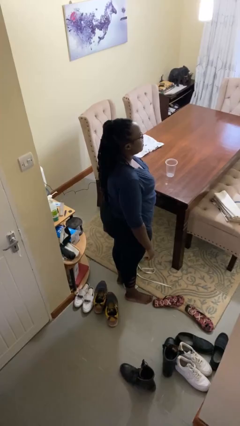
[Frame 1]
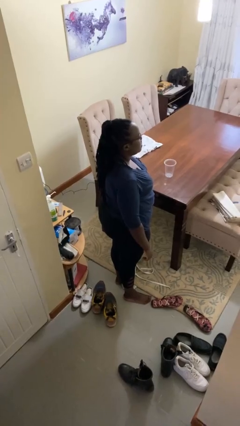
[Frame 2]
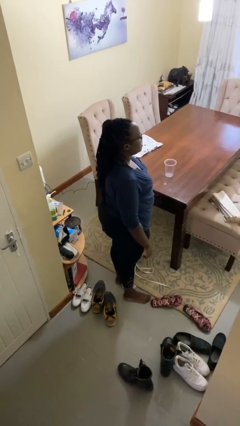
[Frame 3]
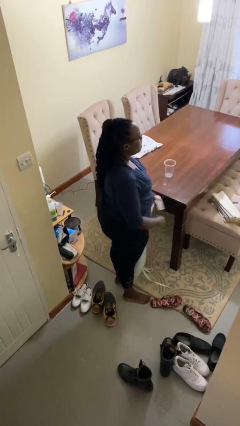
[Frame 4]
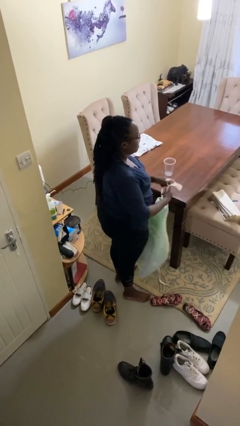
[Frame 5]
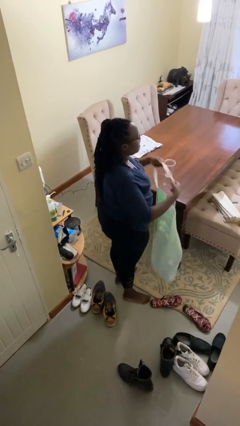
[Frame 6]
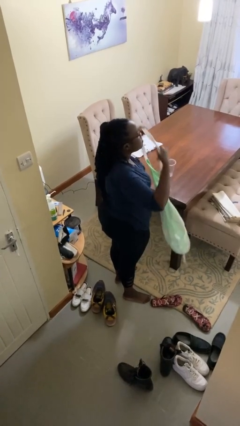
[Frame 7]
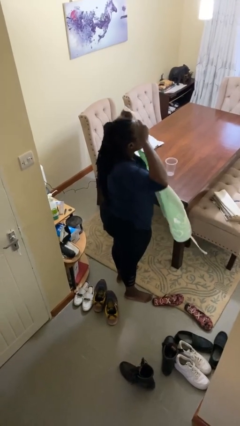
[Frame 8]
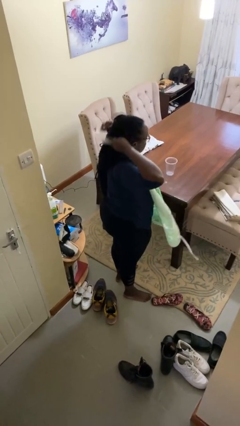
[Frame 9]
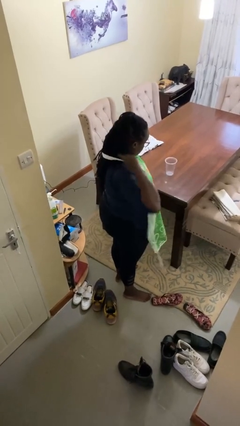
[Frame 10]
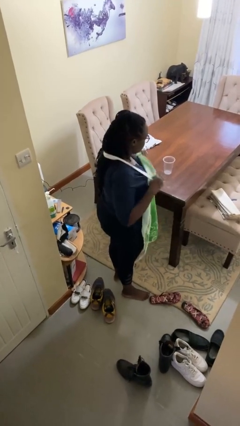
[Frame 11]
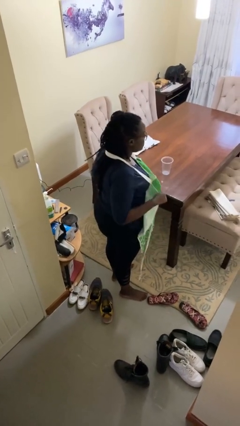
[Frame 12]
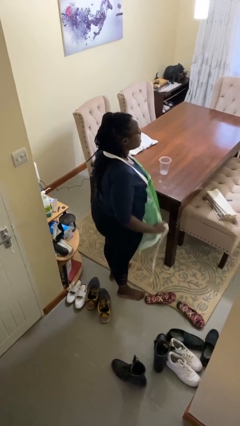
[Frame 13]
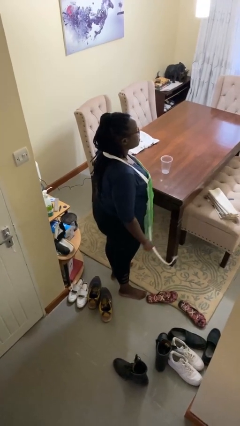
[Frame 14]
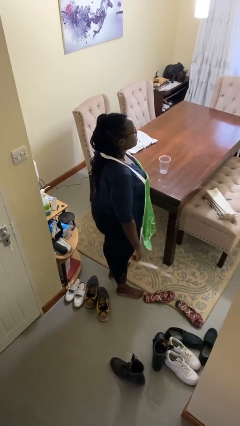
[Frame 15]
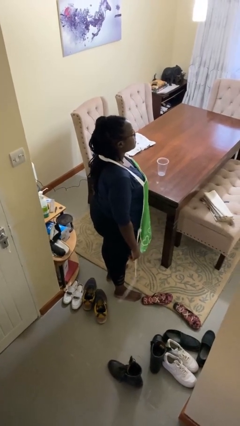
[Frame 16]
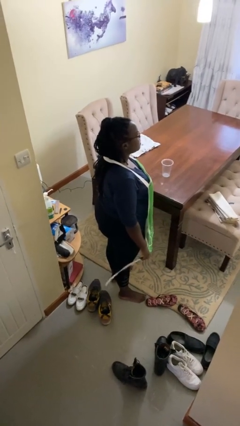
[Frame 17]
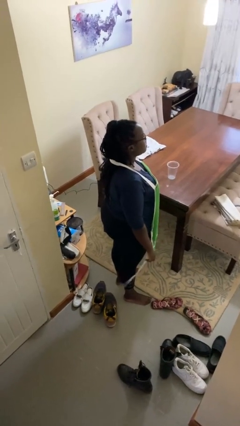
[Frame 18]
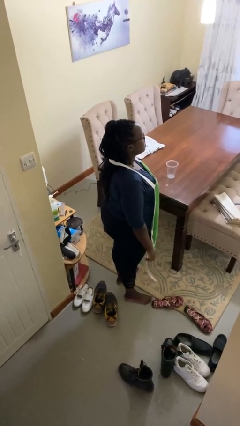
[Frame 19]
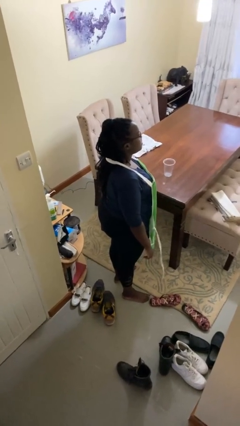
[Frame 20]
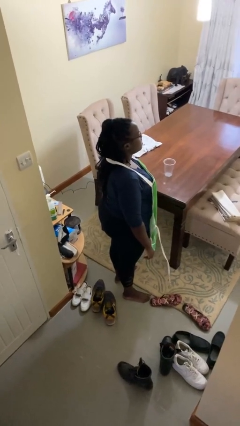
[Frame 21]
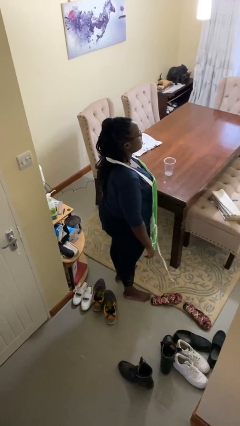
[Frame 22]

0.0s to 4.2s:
person puts on apron

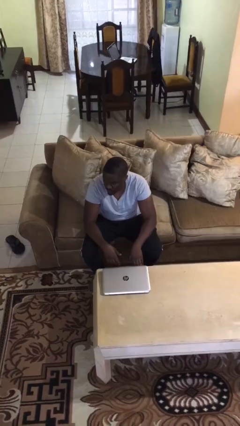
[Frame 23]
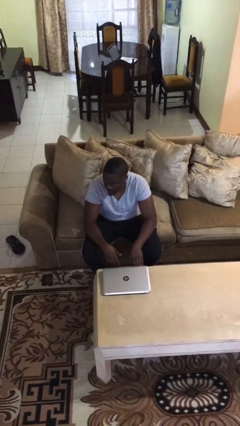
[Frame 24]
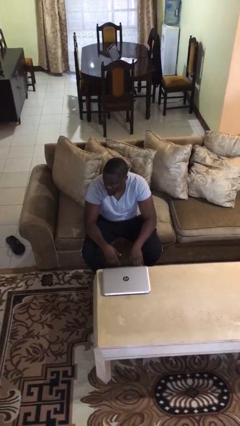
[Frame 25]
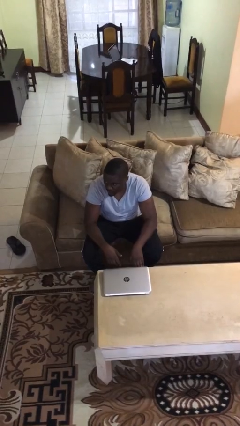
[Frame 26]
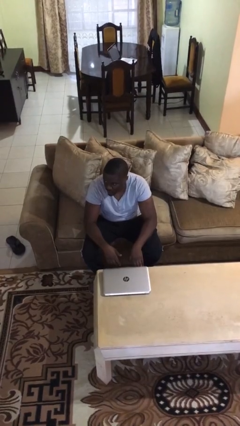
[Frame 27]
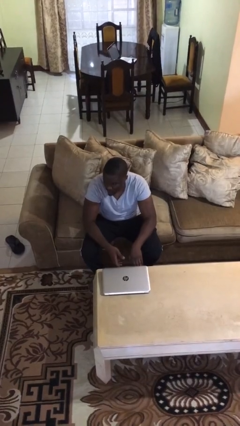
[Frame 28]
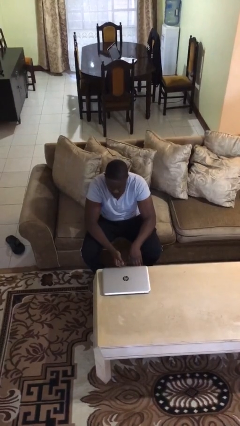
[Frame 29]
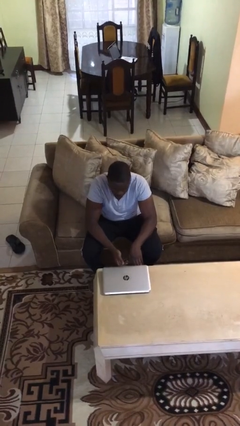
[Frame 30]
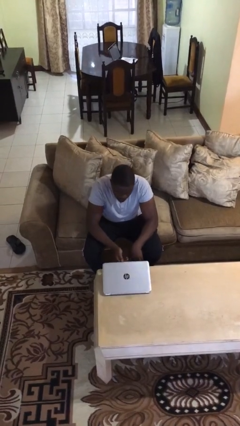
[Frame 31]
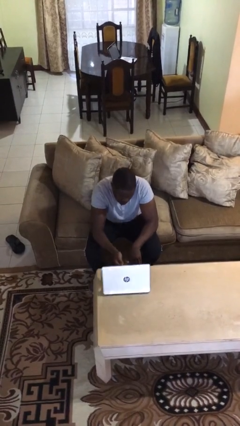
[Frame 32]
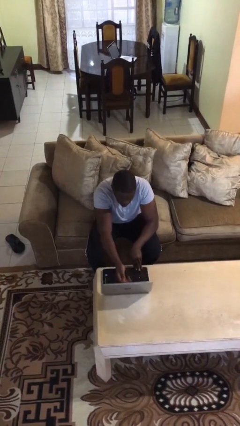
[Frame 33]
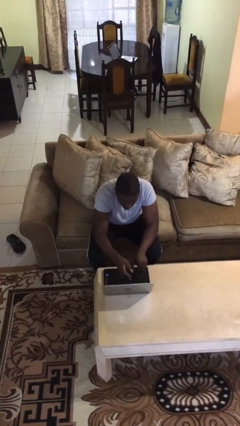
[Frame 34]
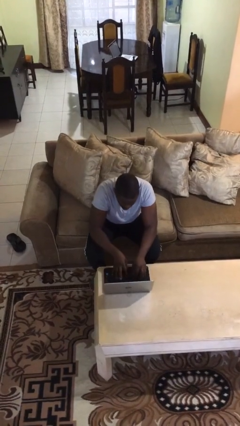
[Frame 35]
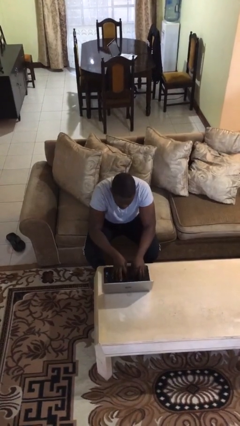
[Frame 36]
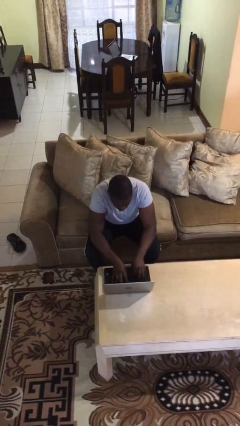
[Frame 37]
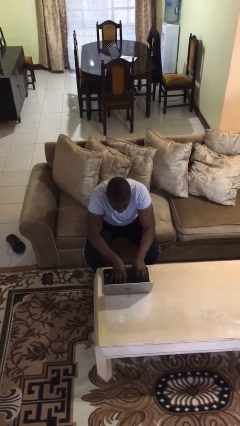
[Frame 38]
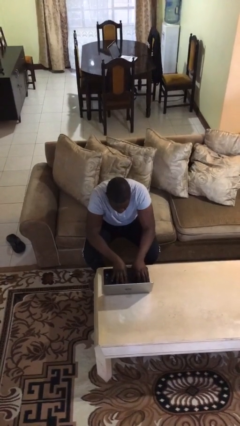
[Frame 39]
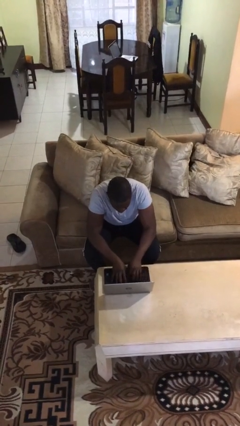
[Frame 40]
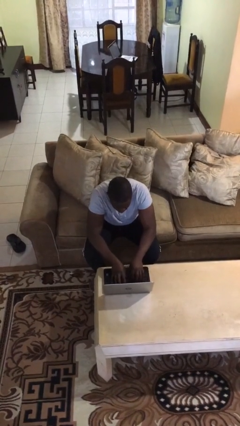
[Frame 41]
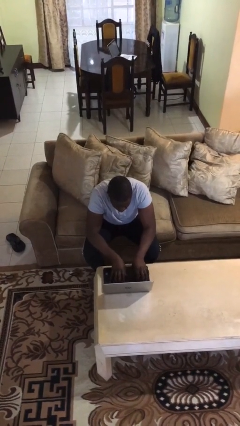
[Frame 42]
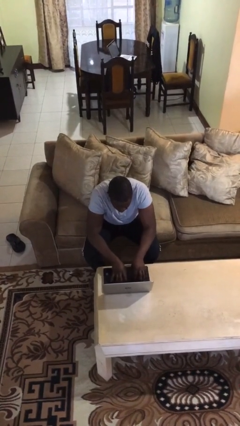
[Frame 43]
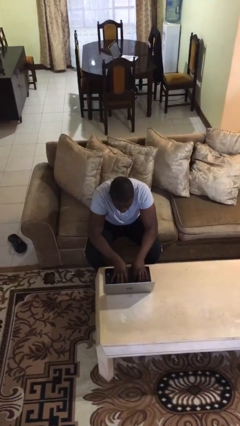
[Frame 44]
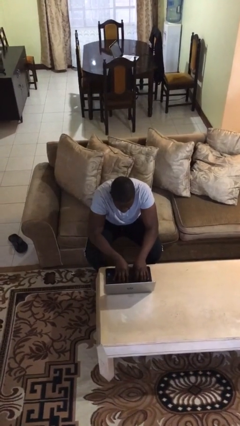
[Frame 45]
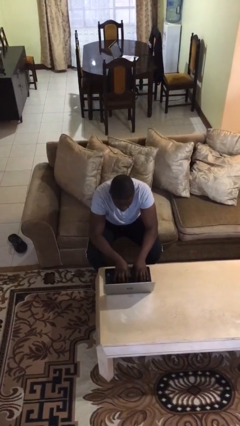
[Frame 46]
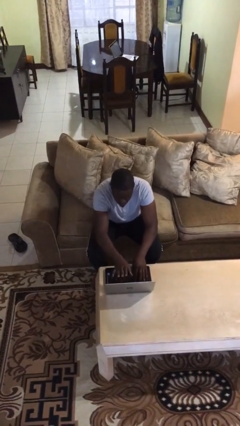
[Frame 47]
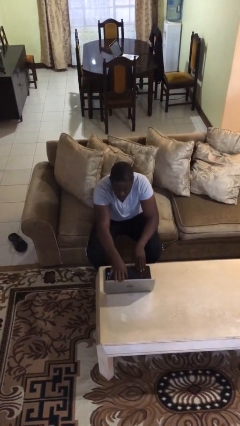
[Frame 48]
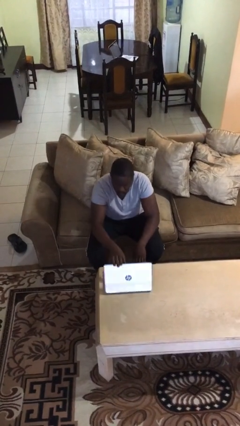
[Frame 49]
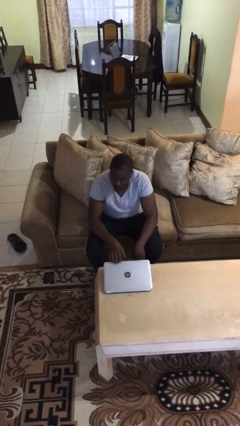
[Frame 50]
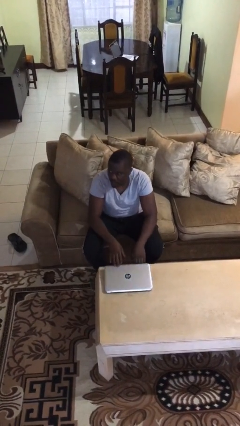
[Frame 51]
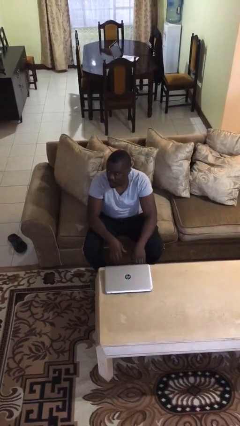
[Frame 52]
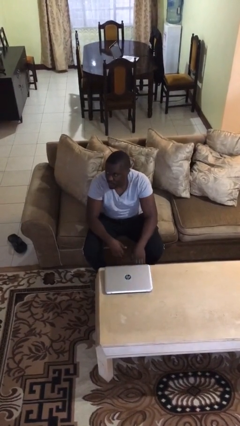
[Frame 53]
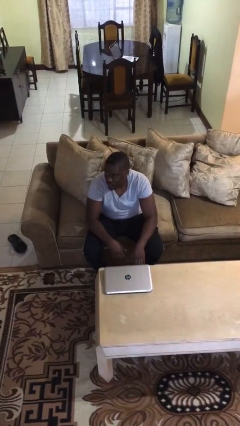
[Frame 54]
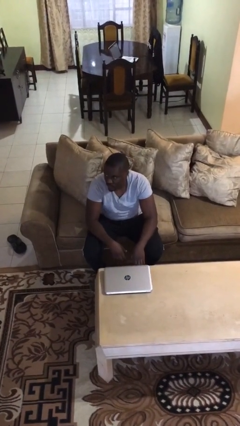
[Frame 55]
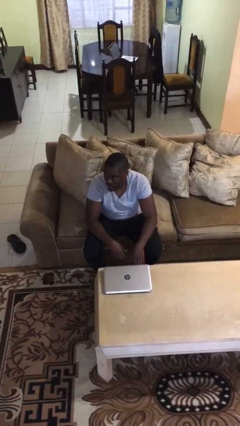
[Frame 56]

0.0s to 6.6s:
person interacts with laptop

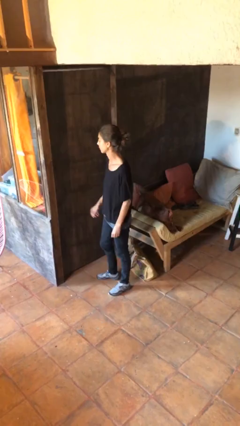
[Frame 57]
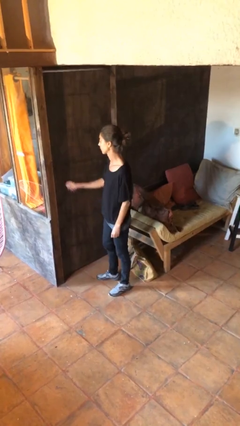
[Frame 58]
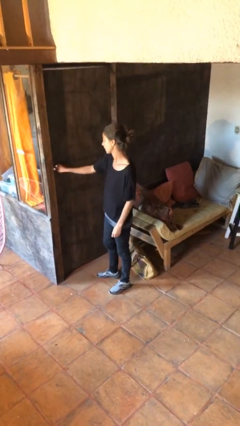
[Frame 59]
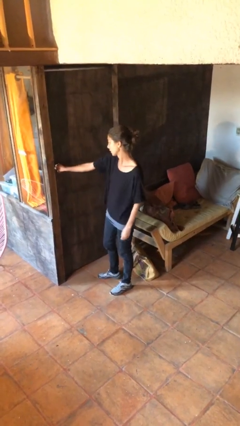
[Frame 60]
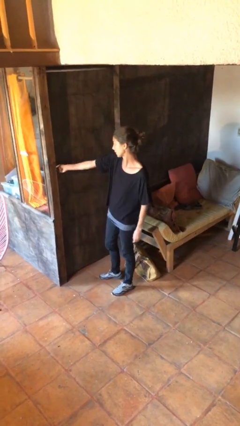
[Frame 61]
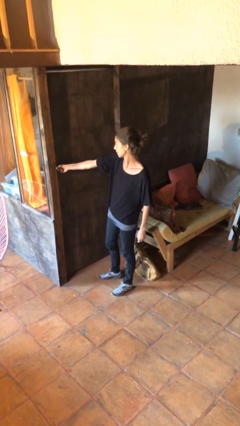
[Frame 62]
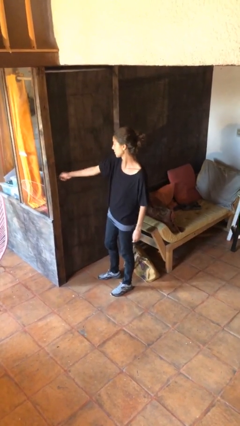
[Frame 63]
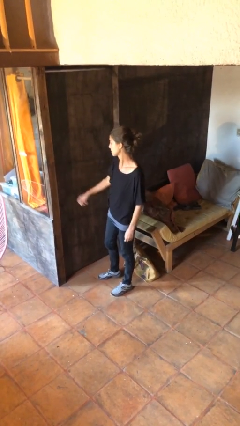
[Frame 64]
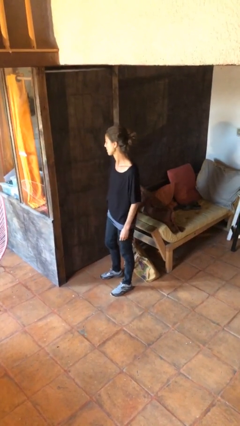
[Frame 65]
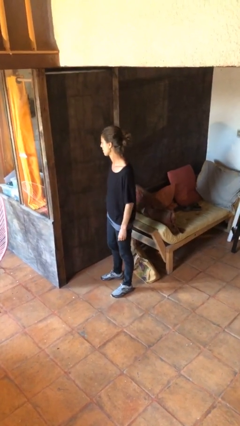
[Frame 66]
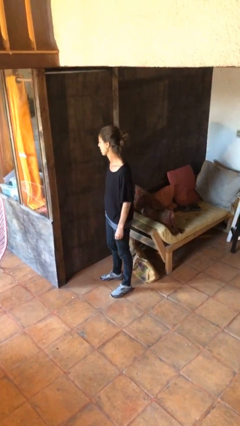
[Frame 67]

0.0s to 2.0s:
person unlocks door with keys

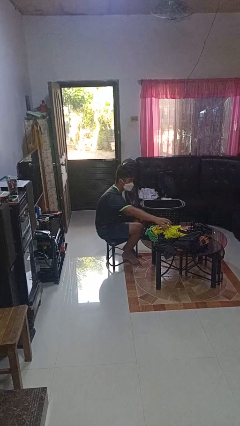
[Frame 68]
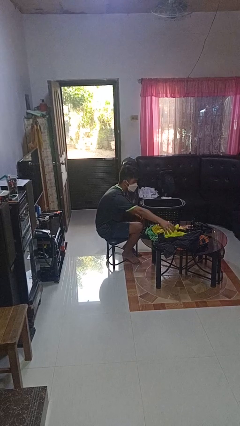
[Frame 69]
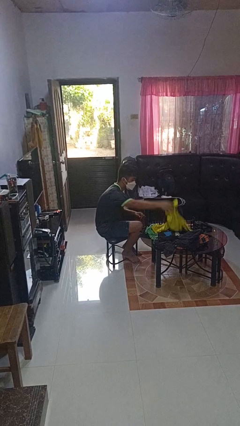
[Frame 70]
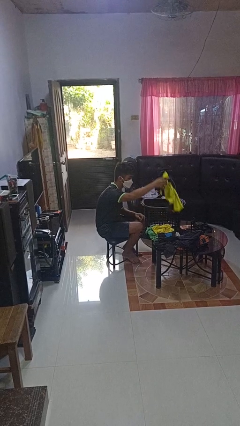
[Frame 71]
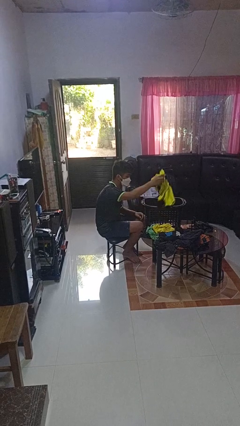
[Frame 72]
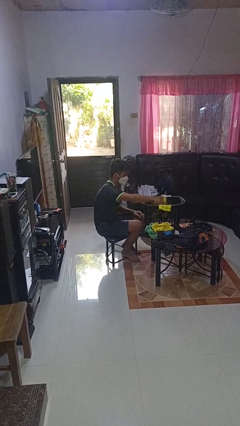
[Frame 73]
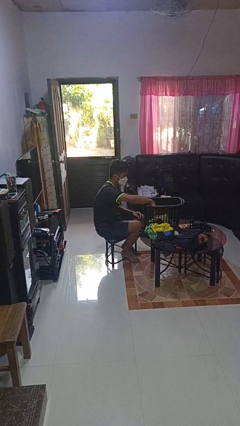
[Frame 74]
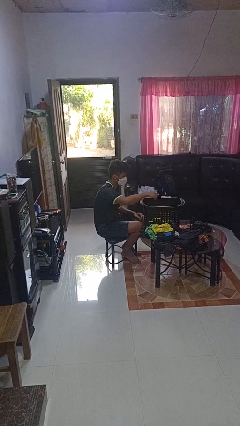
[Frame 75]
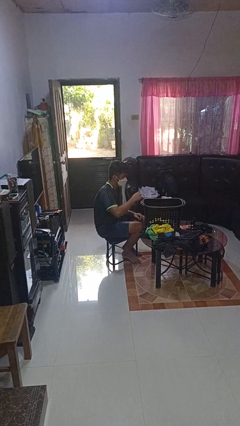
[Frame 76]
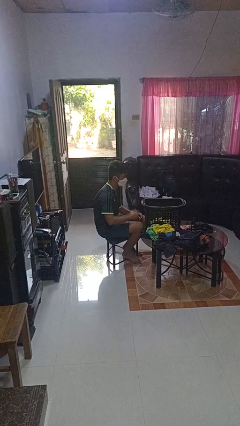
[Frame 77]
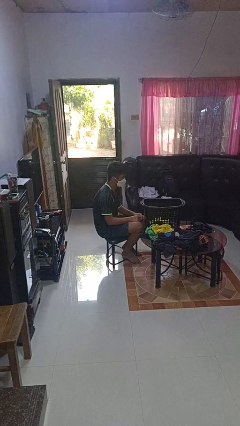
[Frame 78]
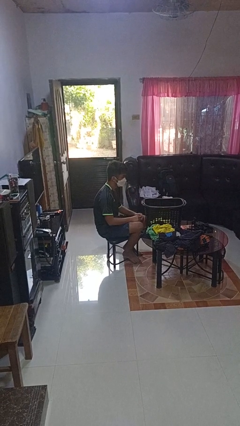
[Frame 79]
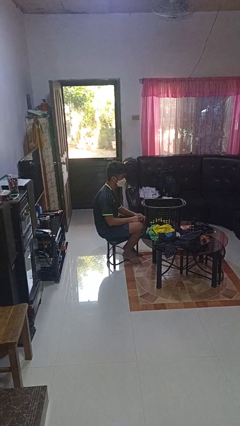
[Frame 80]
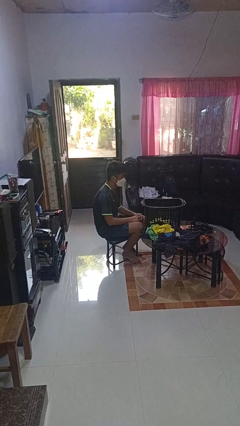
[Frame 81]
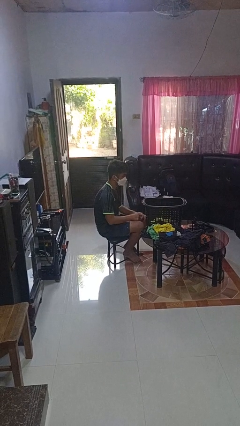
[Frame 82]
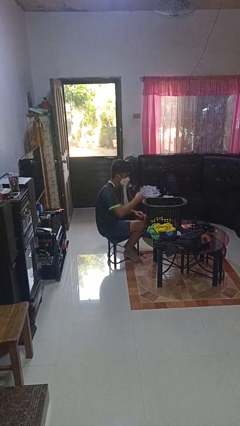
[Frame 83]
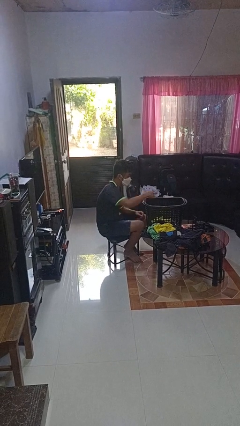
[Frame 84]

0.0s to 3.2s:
person puts object into basket

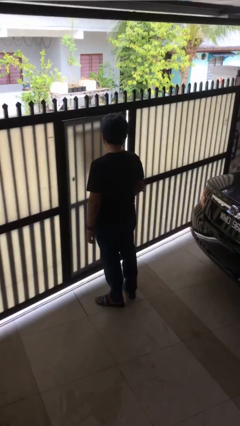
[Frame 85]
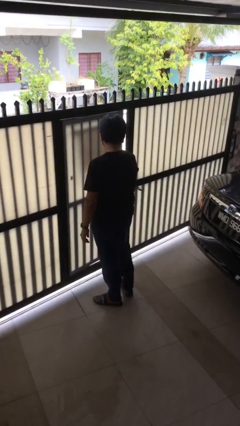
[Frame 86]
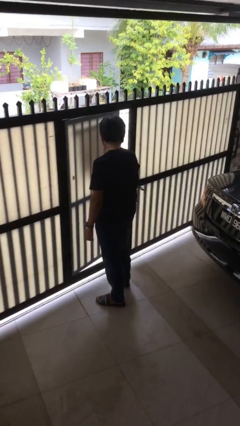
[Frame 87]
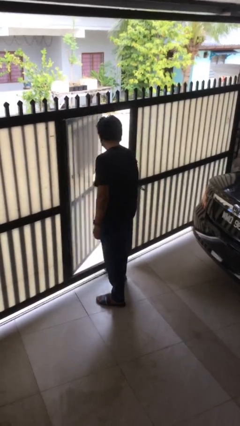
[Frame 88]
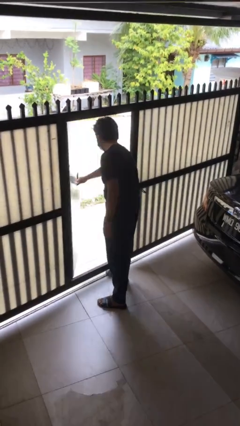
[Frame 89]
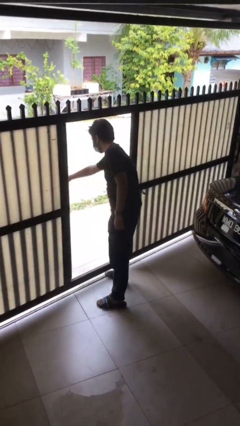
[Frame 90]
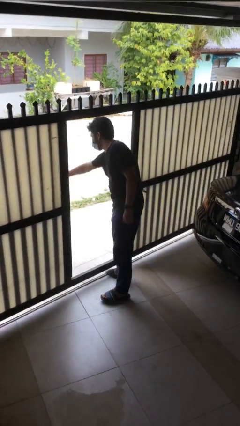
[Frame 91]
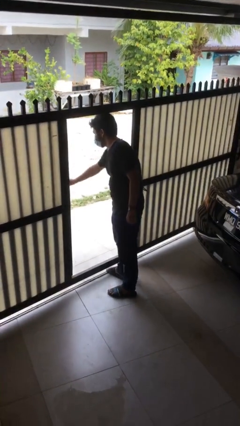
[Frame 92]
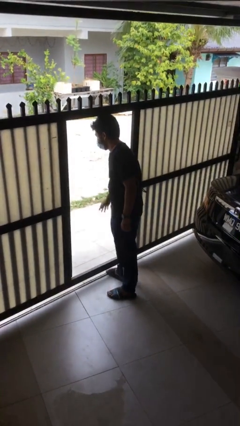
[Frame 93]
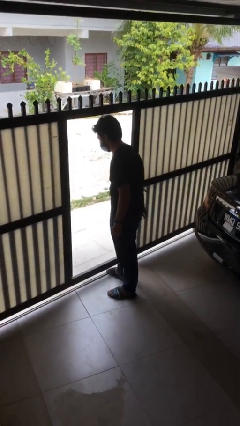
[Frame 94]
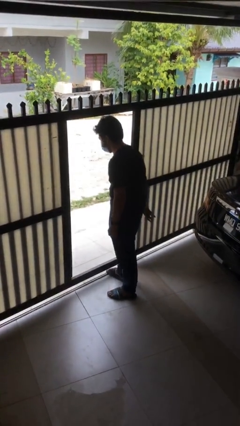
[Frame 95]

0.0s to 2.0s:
person opens gate
